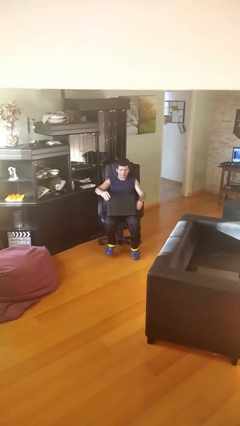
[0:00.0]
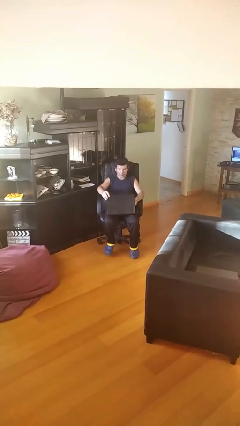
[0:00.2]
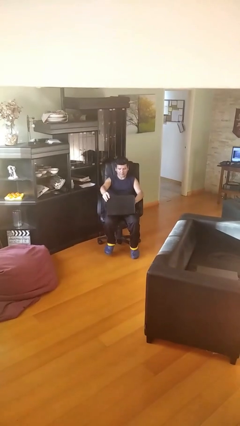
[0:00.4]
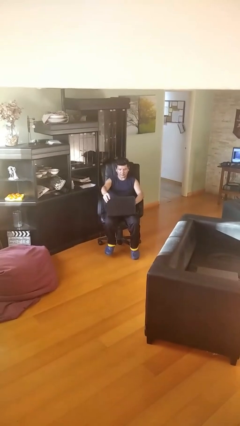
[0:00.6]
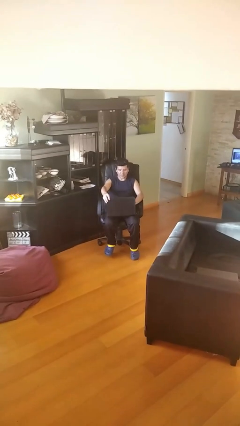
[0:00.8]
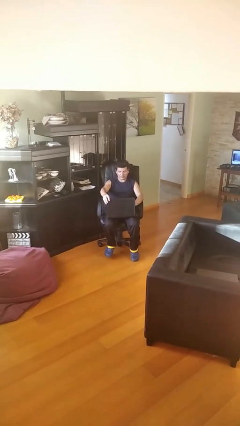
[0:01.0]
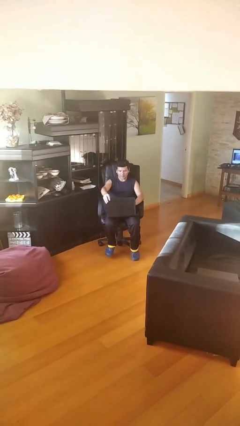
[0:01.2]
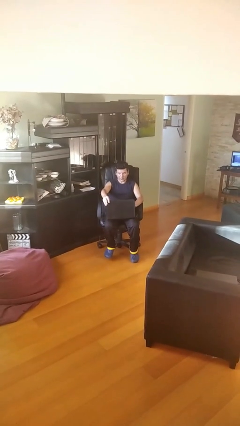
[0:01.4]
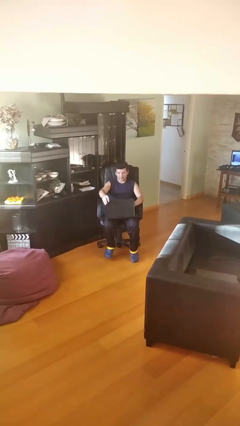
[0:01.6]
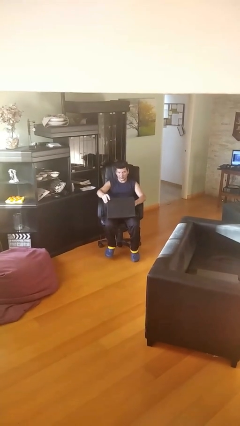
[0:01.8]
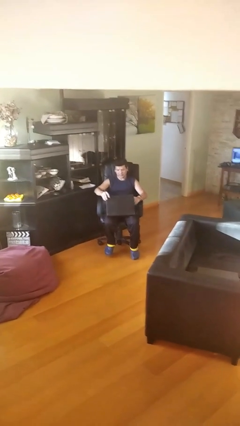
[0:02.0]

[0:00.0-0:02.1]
person interacts with laptop

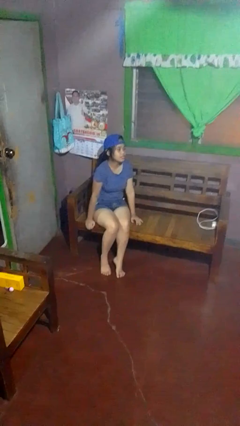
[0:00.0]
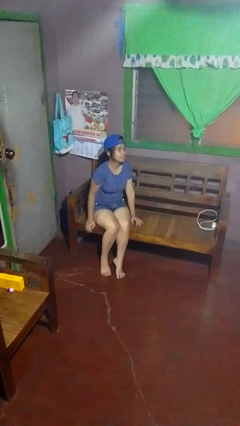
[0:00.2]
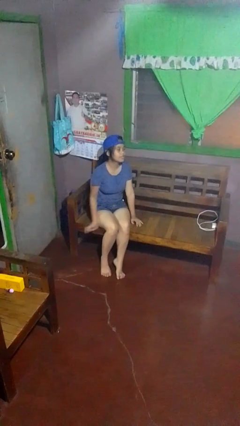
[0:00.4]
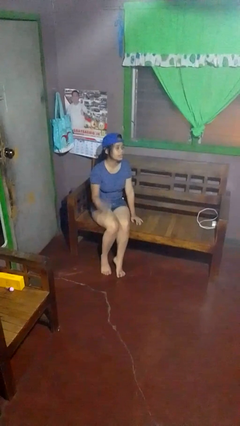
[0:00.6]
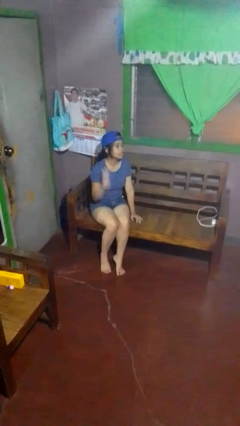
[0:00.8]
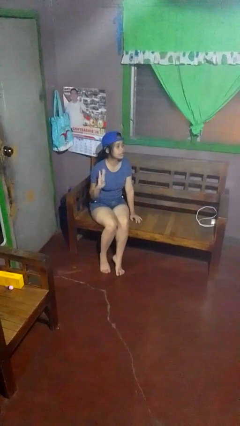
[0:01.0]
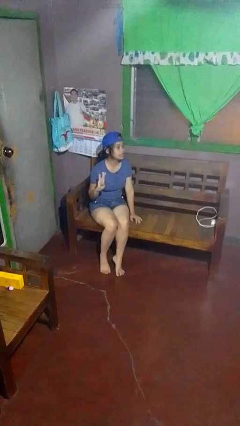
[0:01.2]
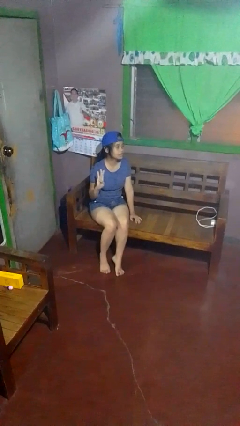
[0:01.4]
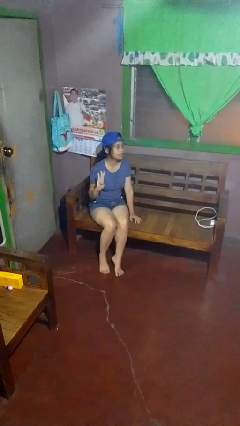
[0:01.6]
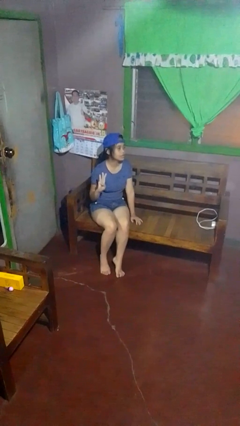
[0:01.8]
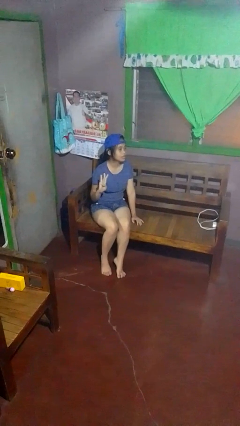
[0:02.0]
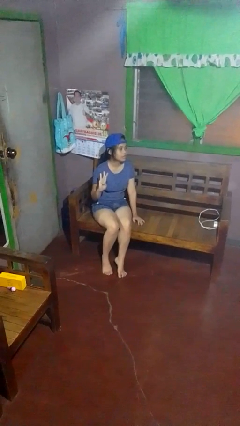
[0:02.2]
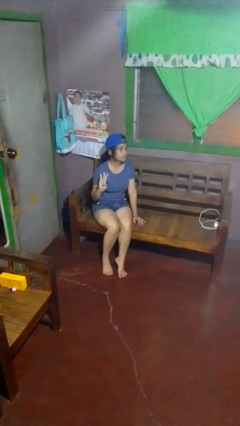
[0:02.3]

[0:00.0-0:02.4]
person gestures number three

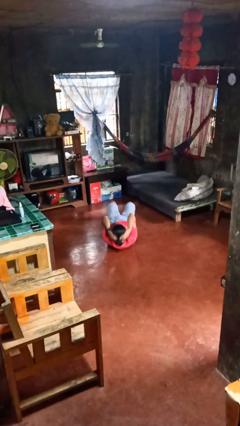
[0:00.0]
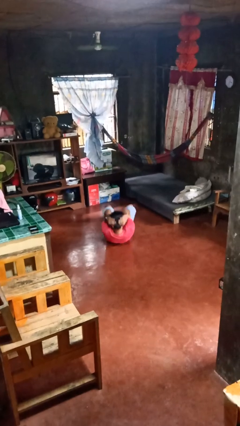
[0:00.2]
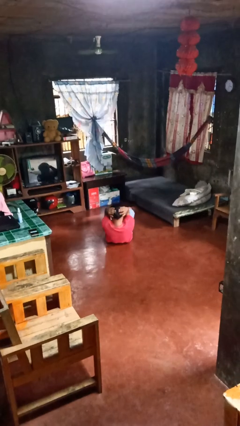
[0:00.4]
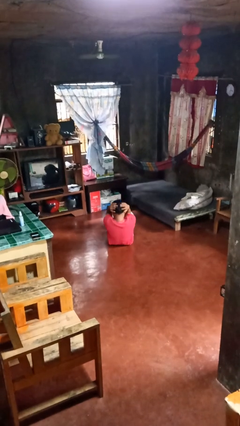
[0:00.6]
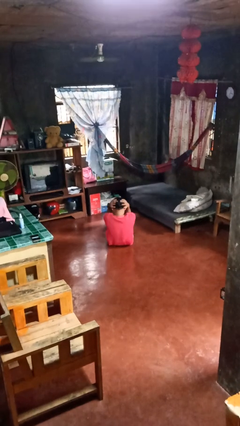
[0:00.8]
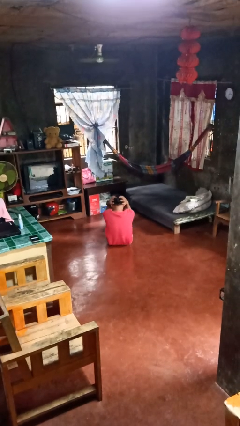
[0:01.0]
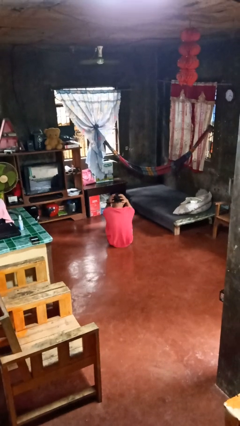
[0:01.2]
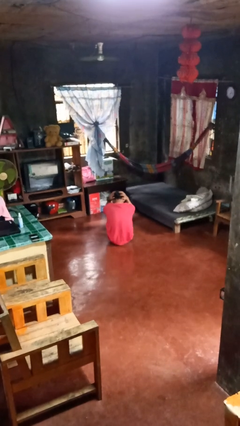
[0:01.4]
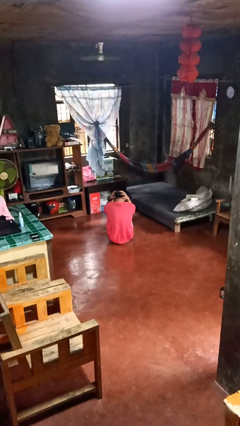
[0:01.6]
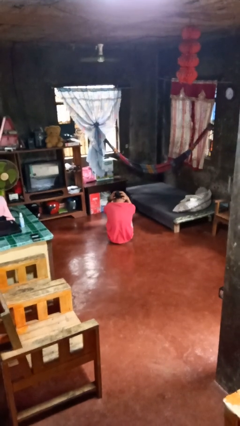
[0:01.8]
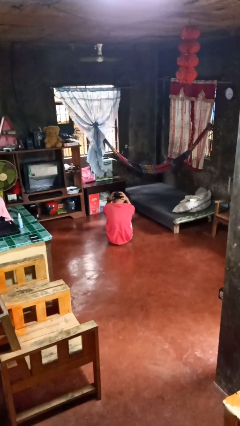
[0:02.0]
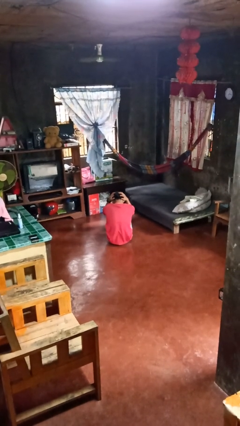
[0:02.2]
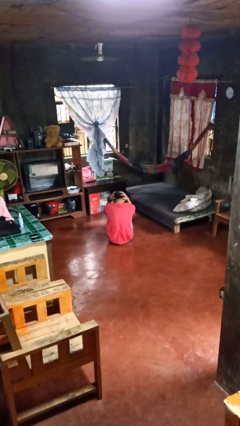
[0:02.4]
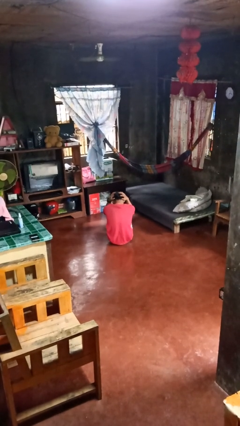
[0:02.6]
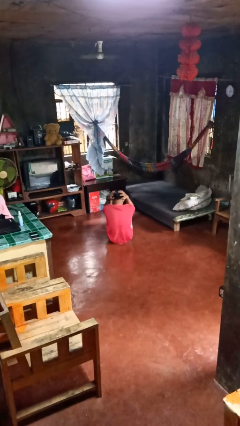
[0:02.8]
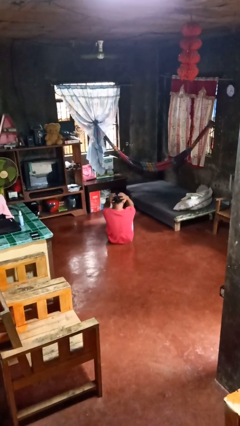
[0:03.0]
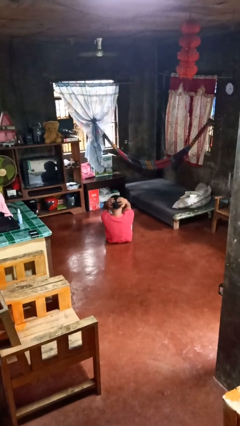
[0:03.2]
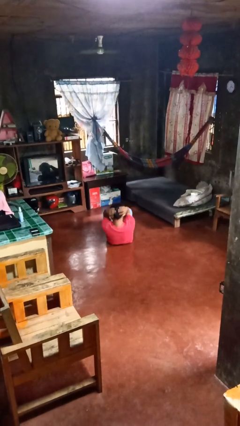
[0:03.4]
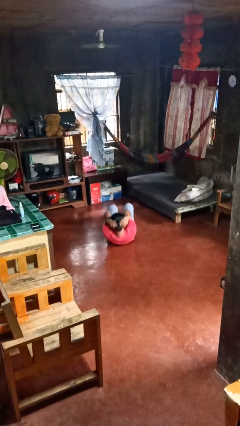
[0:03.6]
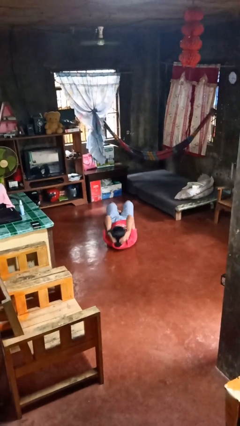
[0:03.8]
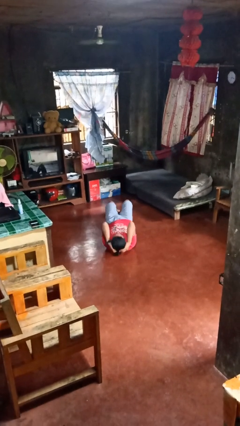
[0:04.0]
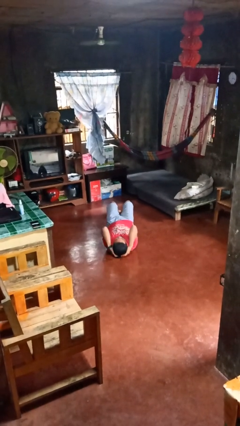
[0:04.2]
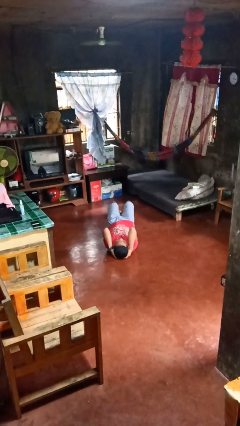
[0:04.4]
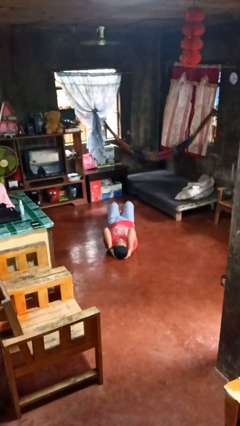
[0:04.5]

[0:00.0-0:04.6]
person exercises with situp

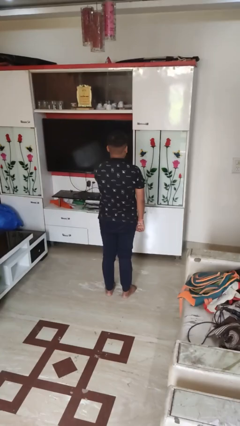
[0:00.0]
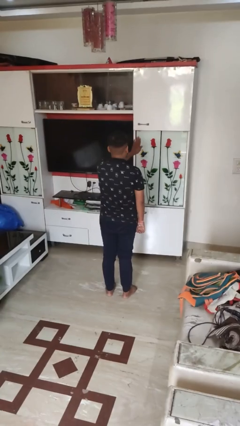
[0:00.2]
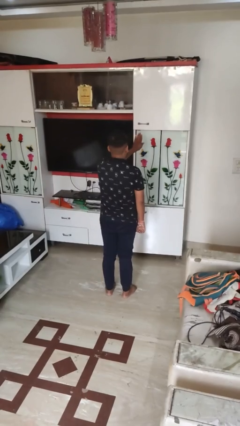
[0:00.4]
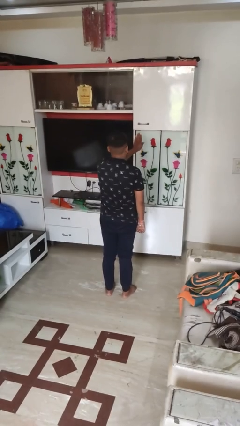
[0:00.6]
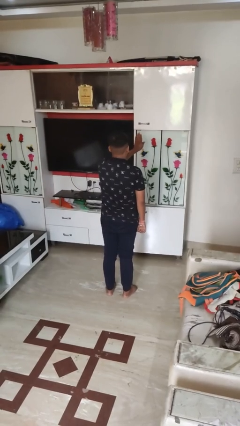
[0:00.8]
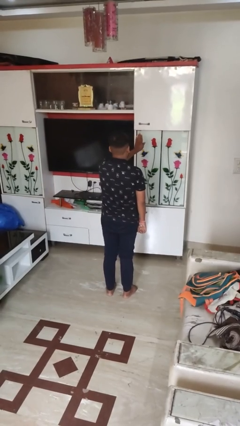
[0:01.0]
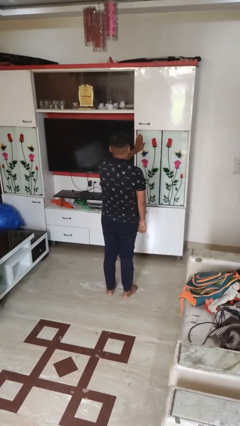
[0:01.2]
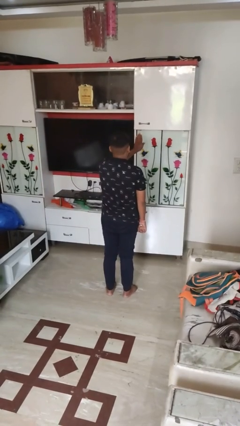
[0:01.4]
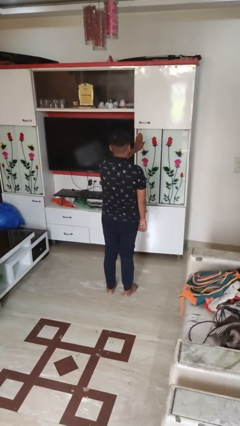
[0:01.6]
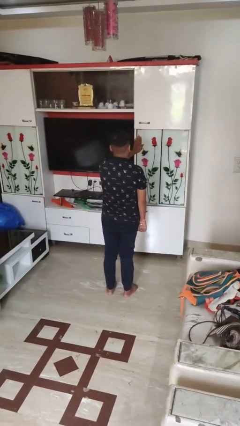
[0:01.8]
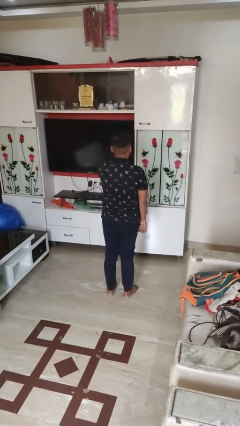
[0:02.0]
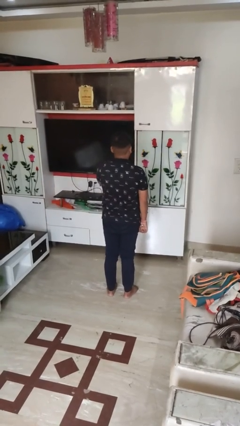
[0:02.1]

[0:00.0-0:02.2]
person gestures stop

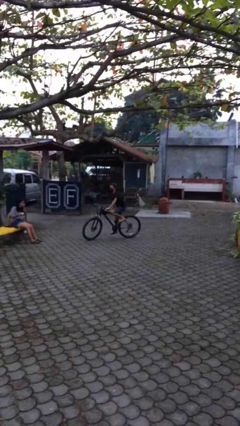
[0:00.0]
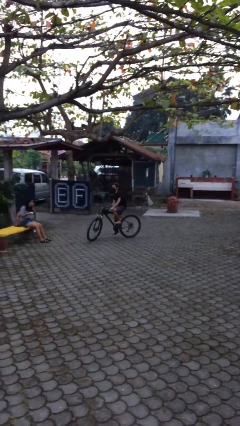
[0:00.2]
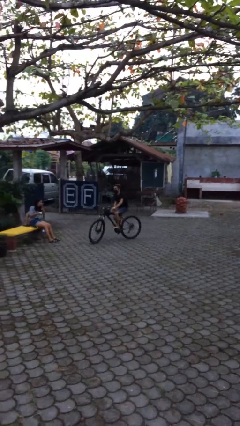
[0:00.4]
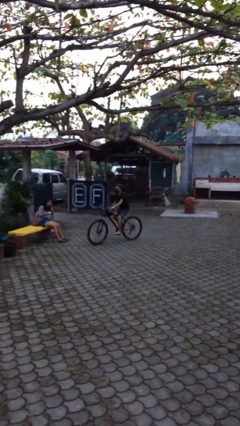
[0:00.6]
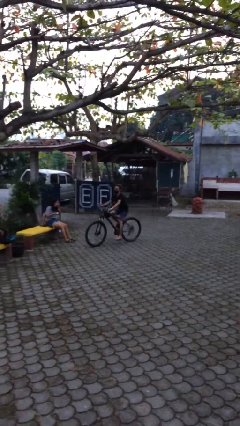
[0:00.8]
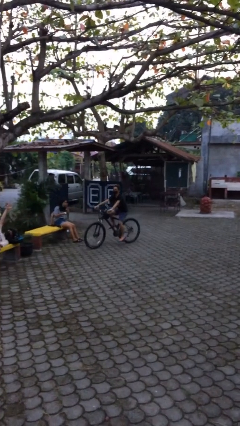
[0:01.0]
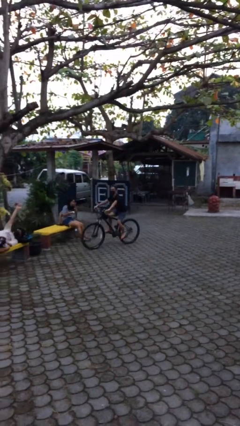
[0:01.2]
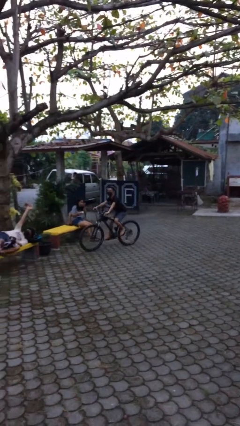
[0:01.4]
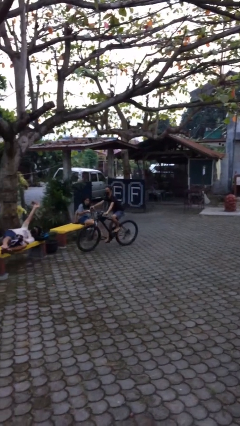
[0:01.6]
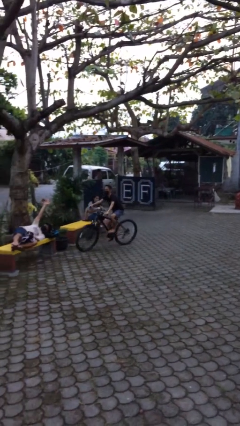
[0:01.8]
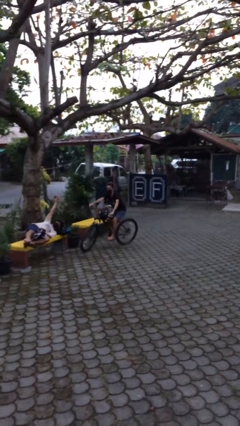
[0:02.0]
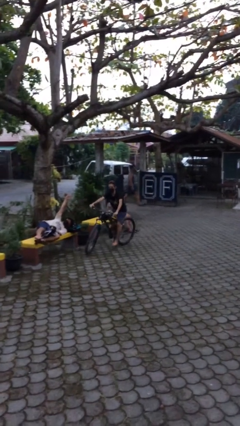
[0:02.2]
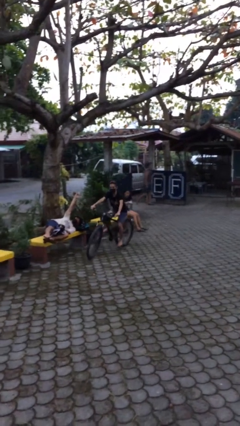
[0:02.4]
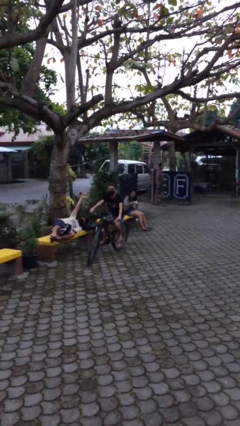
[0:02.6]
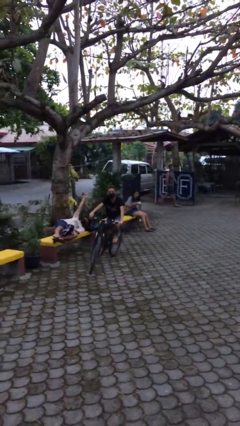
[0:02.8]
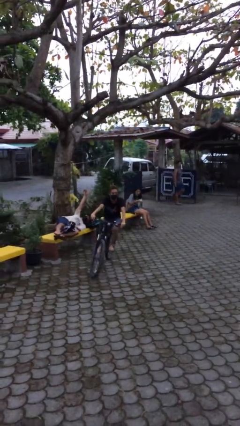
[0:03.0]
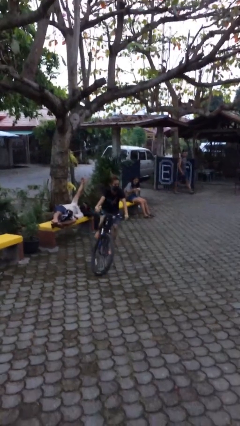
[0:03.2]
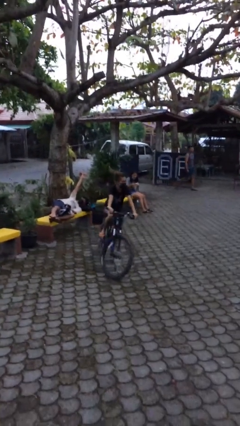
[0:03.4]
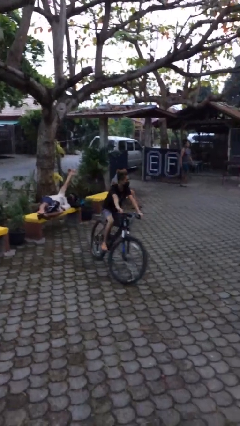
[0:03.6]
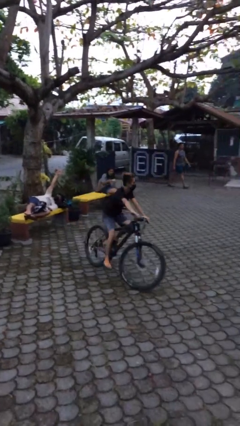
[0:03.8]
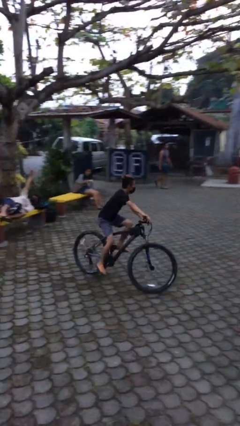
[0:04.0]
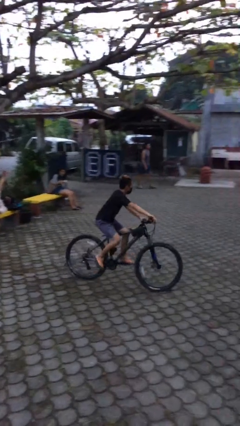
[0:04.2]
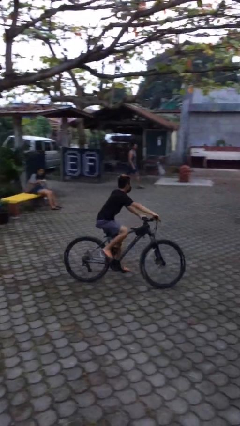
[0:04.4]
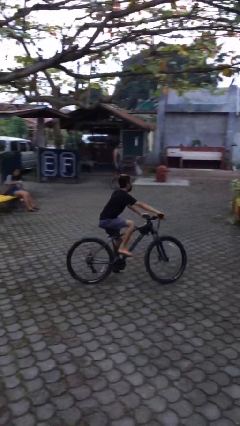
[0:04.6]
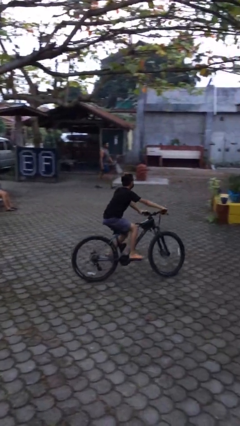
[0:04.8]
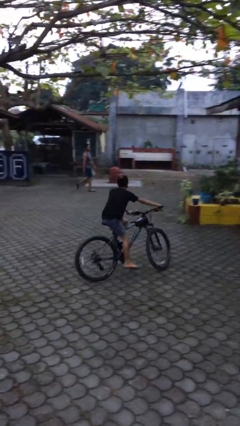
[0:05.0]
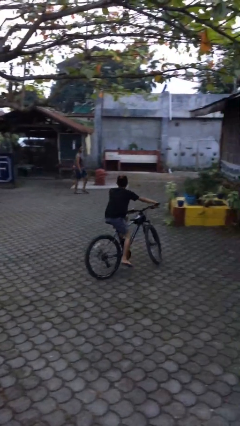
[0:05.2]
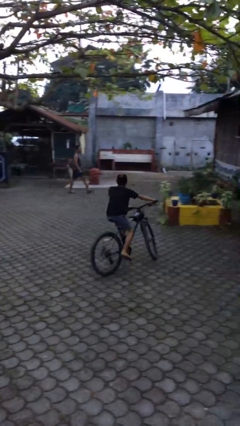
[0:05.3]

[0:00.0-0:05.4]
person rides bicycle

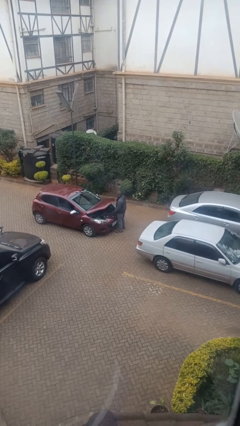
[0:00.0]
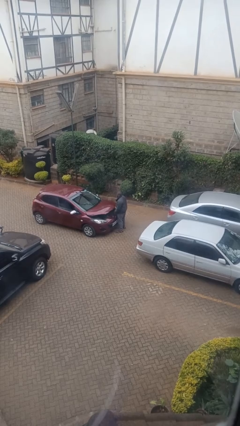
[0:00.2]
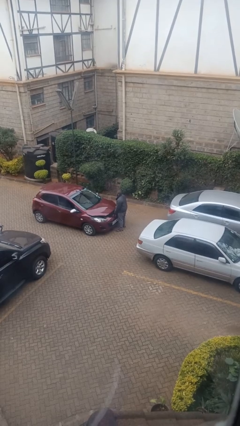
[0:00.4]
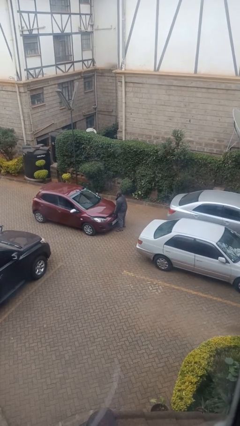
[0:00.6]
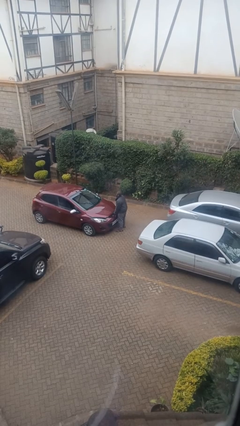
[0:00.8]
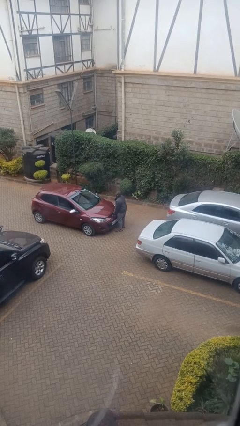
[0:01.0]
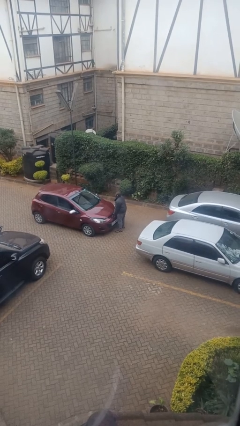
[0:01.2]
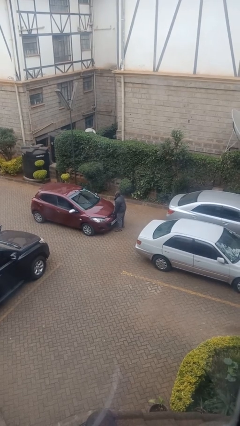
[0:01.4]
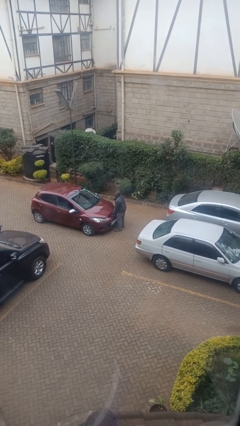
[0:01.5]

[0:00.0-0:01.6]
person closes car hood
